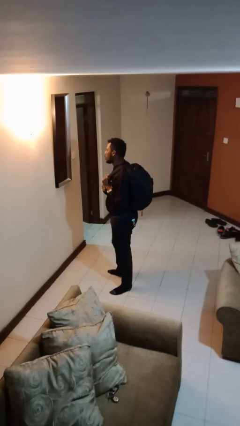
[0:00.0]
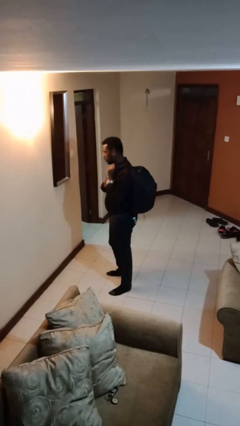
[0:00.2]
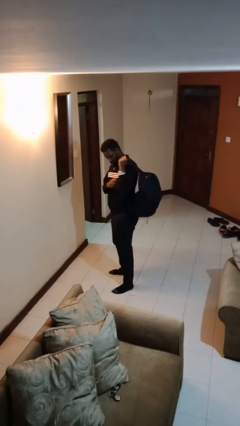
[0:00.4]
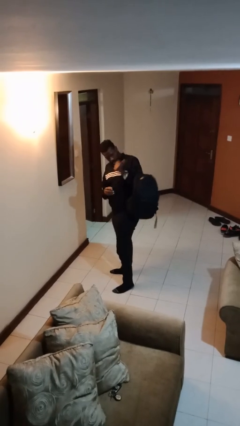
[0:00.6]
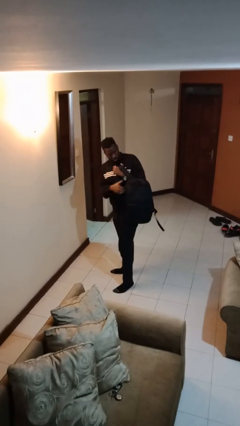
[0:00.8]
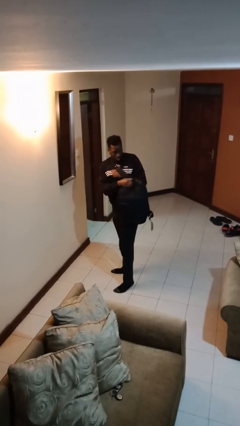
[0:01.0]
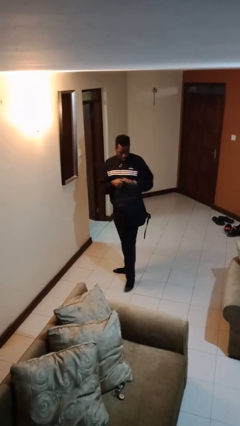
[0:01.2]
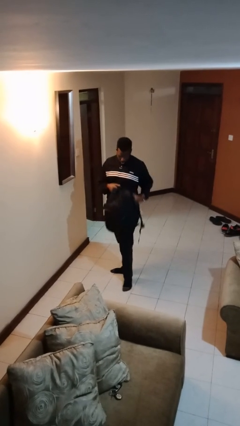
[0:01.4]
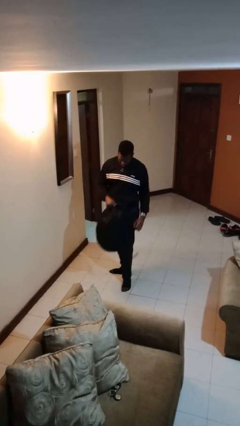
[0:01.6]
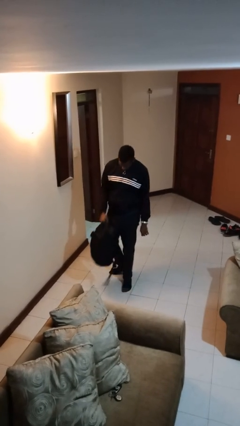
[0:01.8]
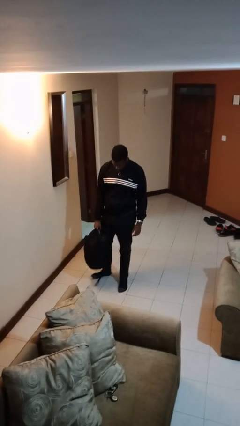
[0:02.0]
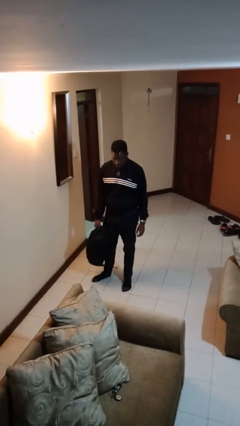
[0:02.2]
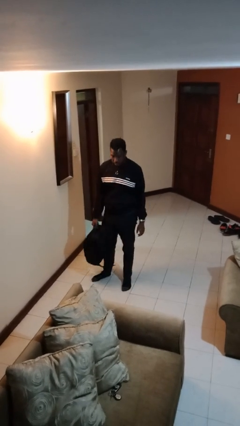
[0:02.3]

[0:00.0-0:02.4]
person takes off backpack

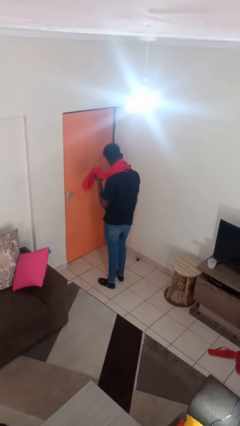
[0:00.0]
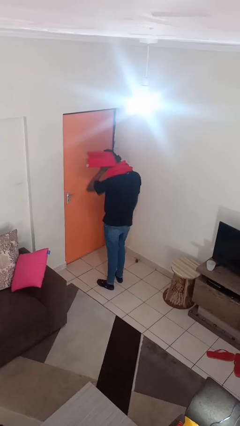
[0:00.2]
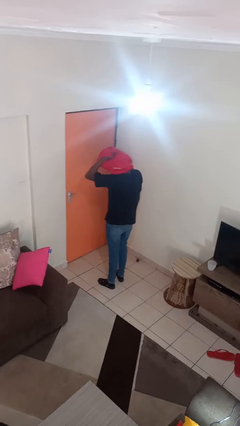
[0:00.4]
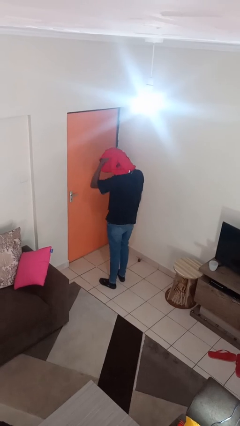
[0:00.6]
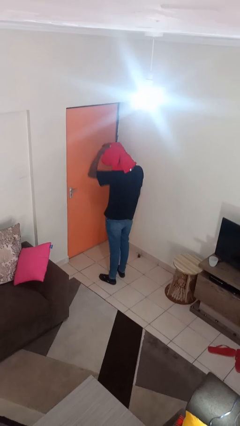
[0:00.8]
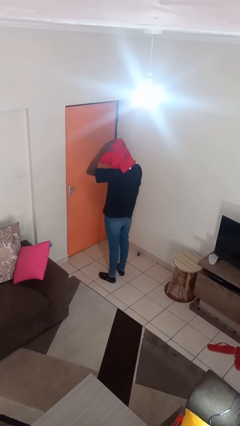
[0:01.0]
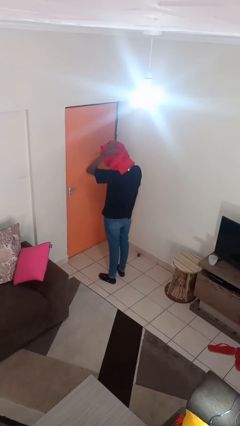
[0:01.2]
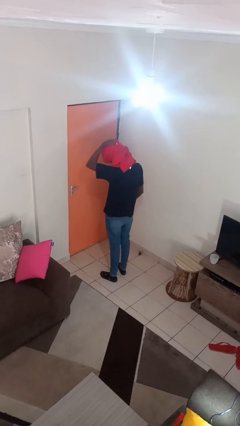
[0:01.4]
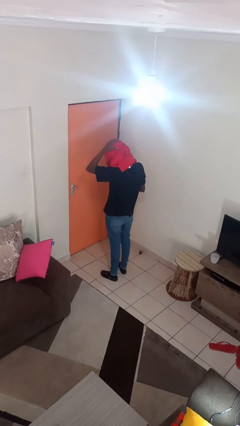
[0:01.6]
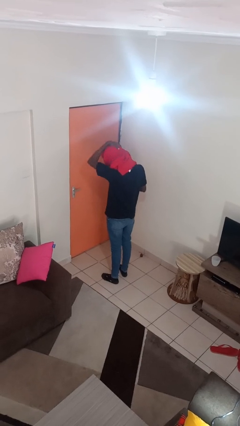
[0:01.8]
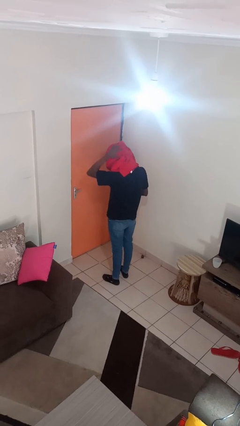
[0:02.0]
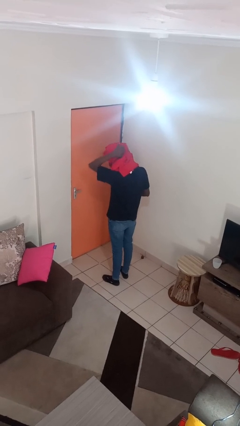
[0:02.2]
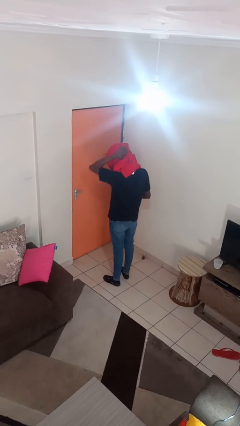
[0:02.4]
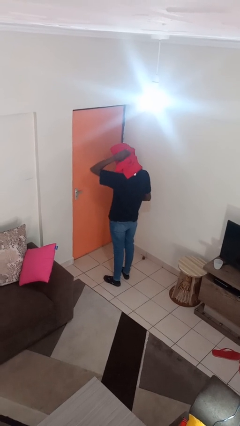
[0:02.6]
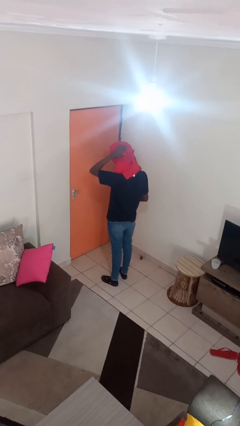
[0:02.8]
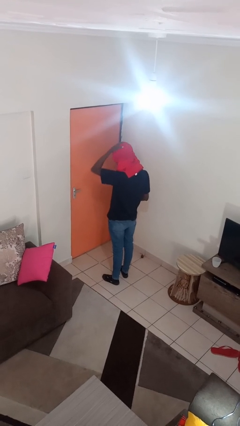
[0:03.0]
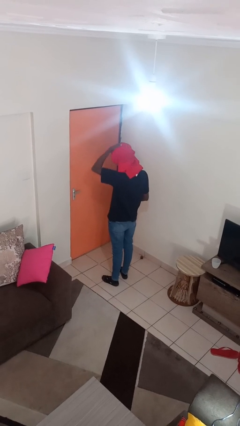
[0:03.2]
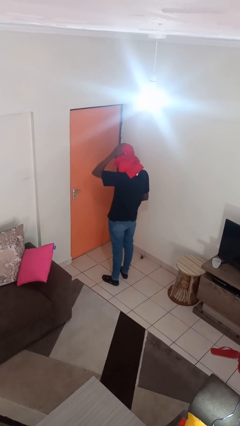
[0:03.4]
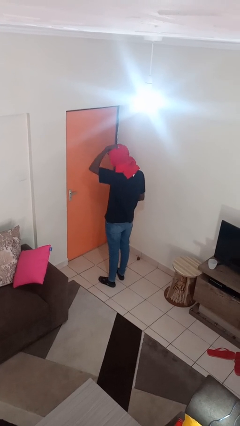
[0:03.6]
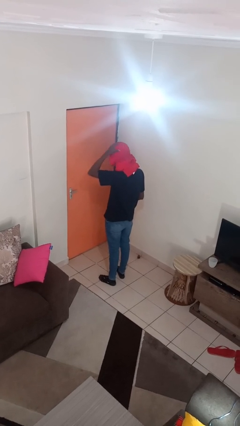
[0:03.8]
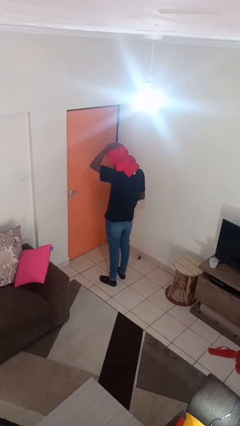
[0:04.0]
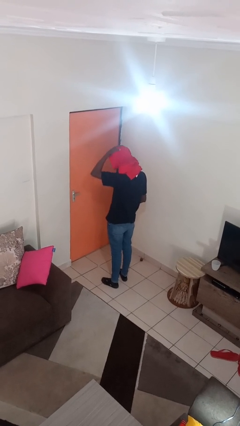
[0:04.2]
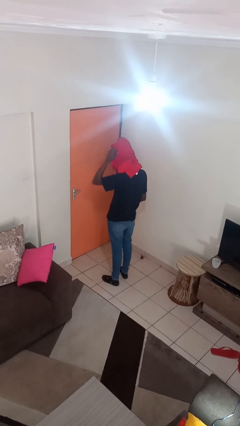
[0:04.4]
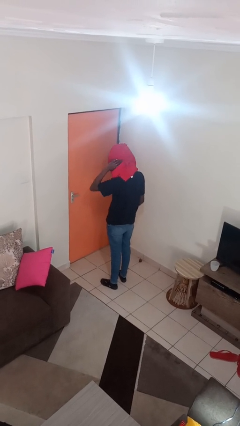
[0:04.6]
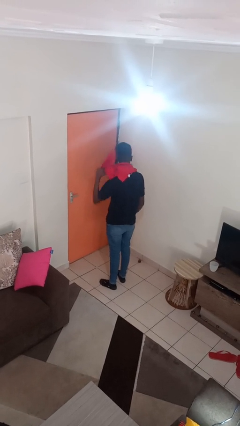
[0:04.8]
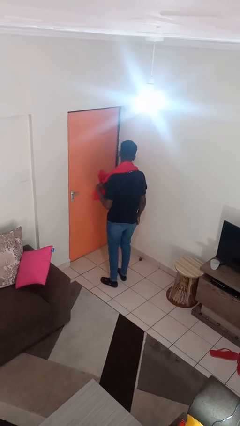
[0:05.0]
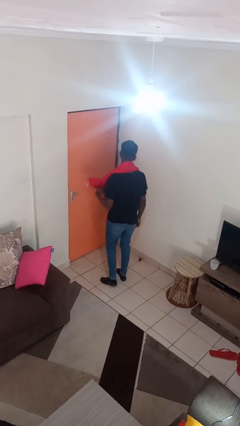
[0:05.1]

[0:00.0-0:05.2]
person dries hair with towel

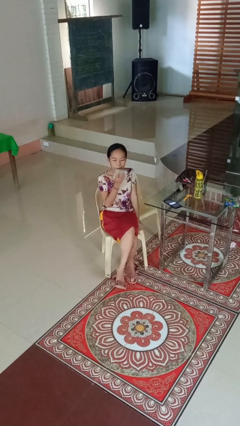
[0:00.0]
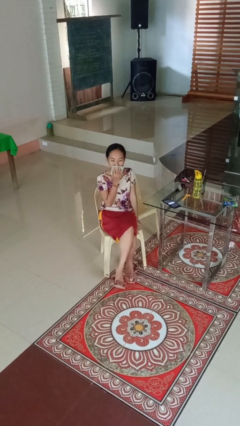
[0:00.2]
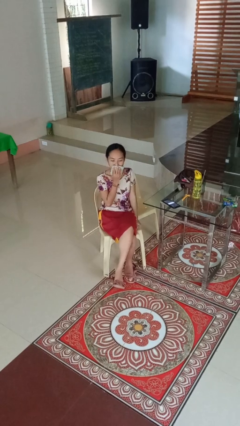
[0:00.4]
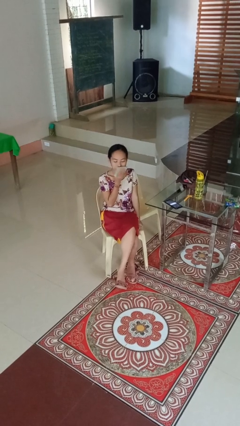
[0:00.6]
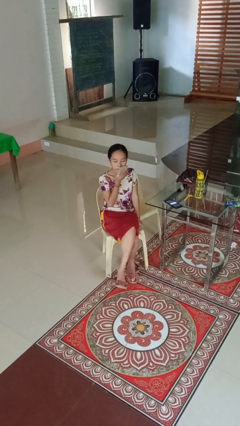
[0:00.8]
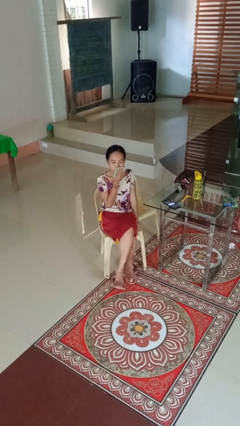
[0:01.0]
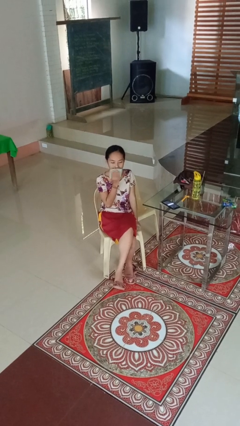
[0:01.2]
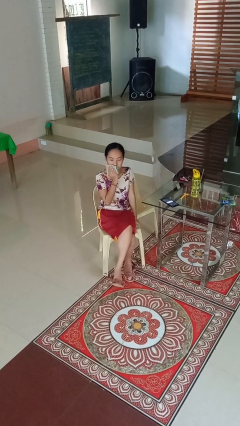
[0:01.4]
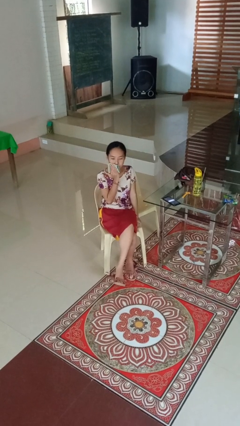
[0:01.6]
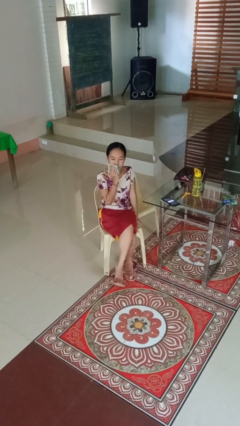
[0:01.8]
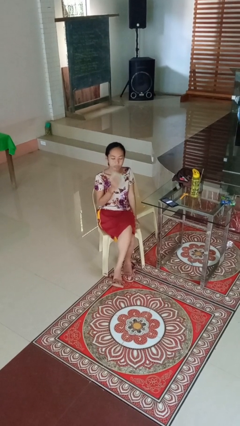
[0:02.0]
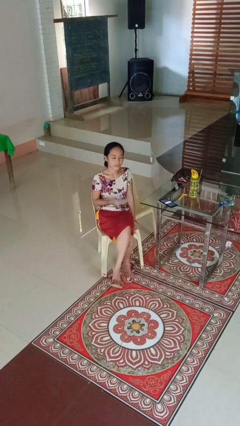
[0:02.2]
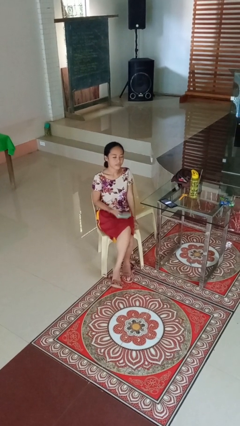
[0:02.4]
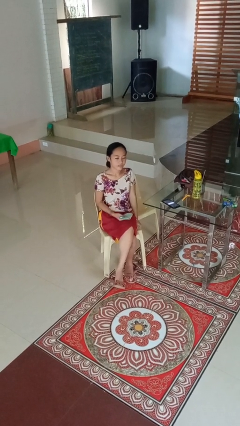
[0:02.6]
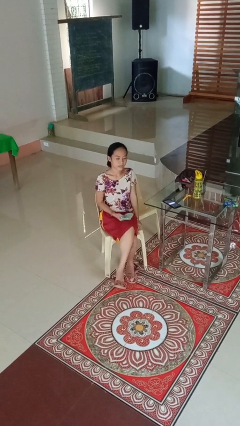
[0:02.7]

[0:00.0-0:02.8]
person wipes mouth with napkin

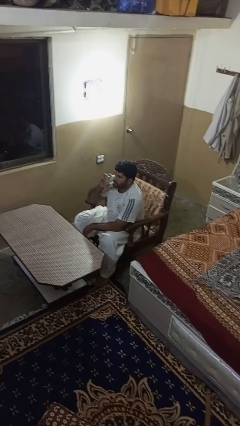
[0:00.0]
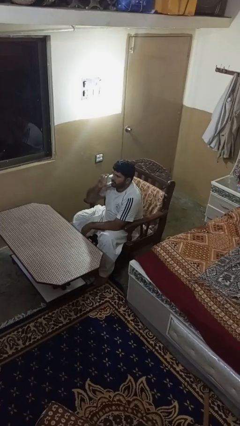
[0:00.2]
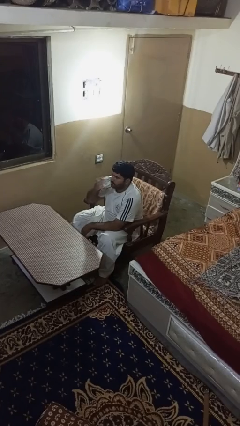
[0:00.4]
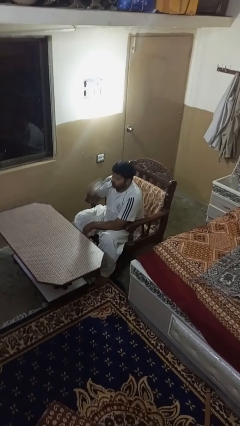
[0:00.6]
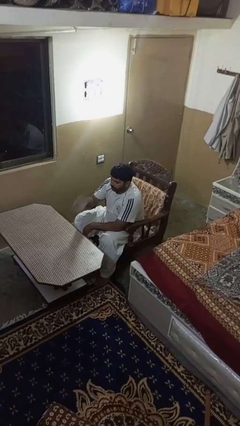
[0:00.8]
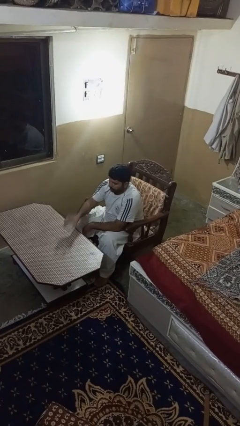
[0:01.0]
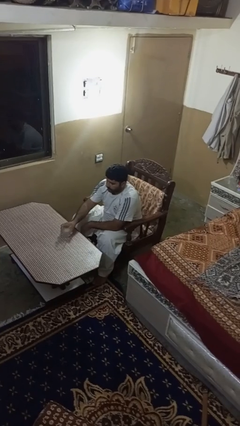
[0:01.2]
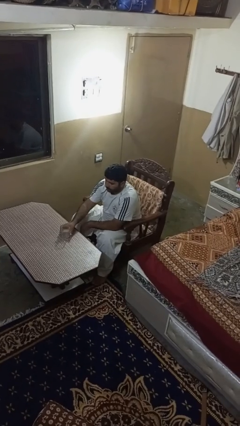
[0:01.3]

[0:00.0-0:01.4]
person puts down object on table

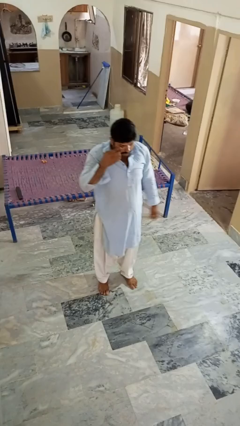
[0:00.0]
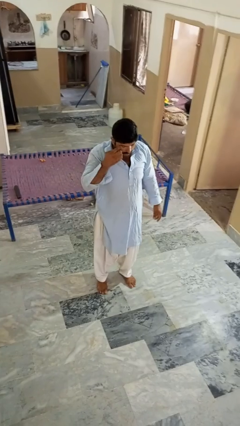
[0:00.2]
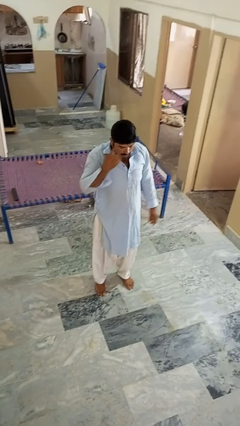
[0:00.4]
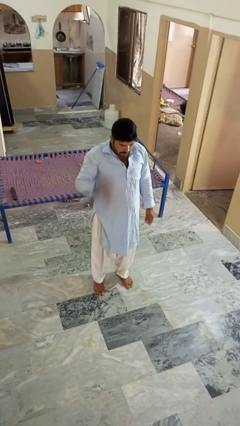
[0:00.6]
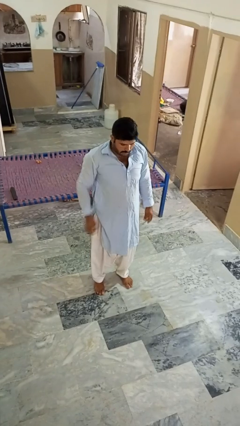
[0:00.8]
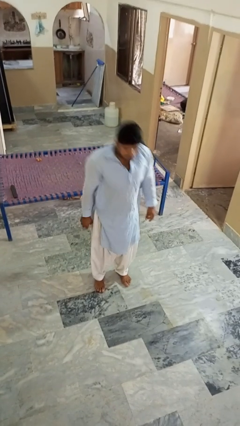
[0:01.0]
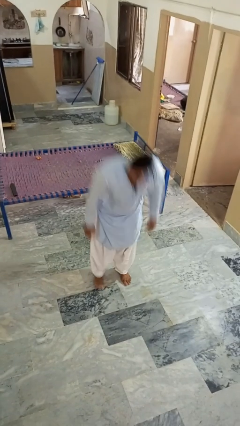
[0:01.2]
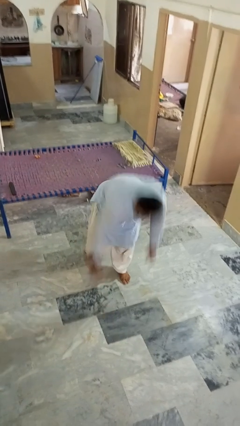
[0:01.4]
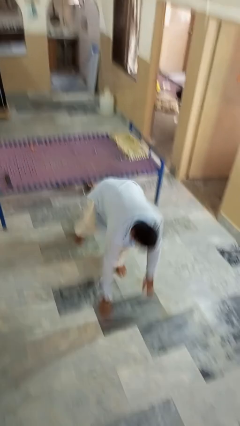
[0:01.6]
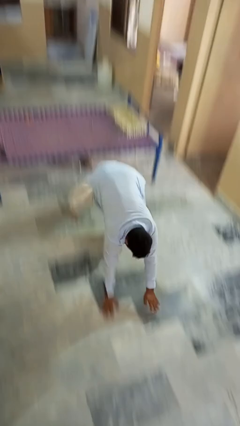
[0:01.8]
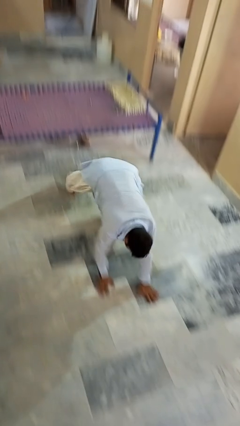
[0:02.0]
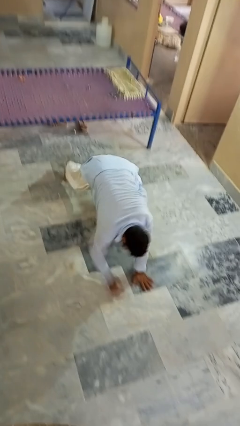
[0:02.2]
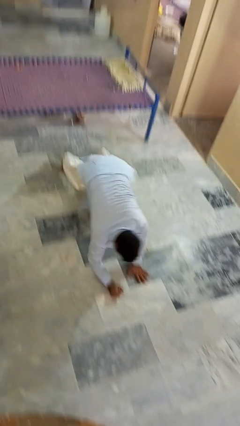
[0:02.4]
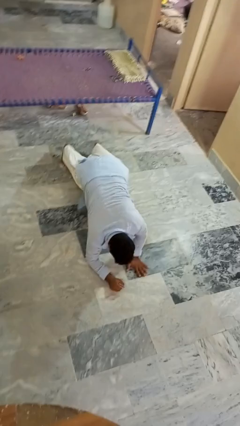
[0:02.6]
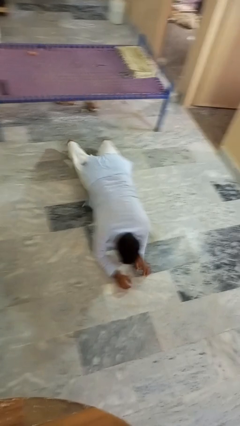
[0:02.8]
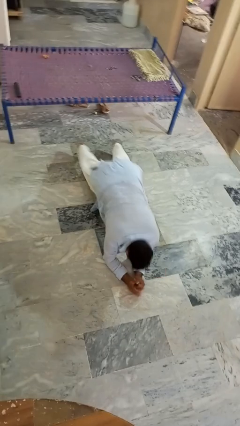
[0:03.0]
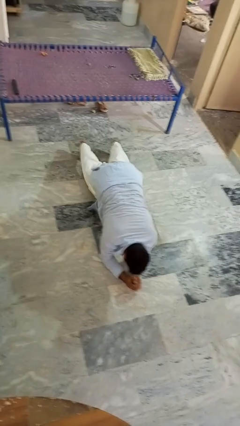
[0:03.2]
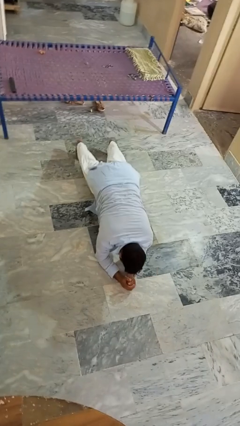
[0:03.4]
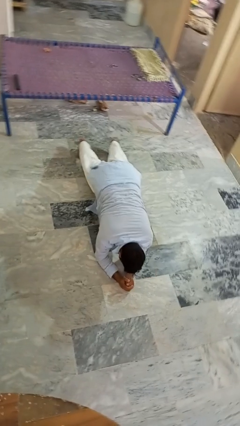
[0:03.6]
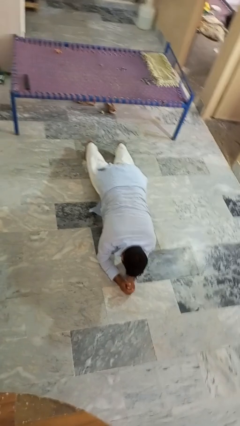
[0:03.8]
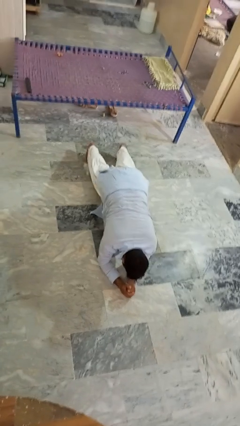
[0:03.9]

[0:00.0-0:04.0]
person exercises with plank

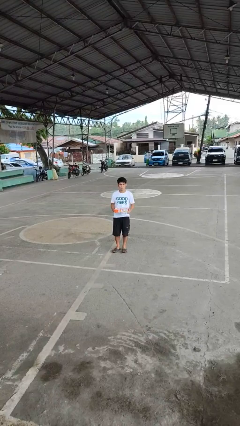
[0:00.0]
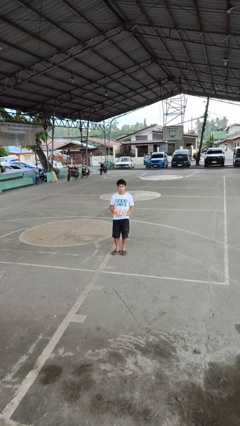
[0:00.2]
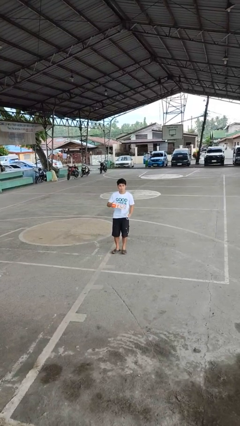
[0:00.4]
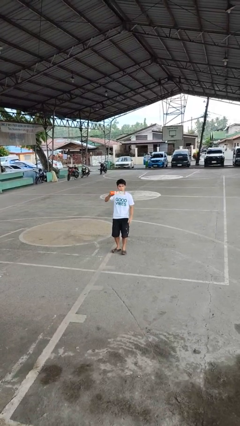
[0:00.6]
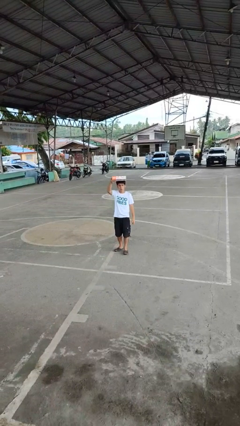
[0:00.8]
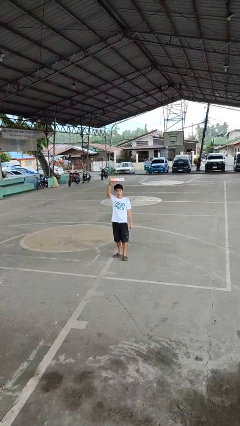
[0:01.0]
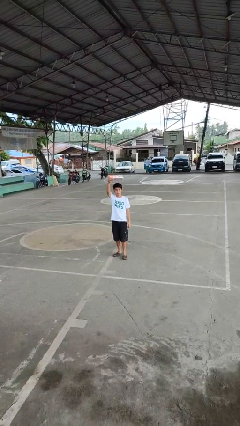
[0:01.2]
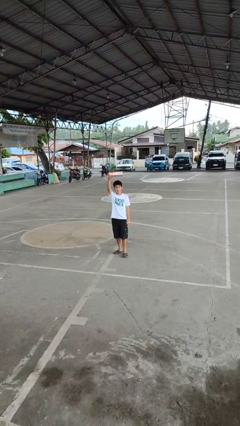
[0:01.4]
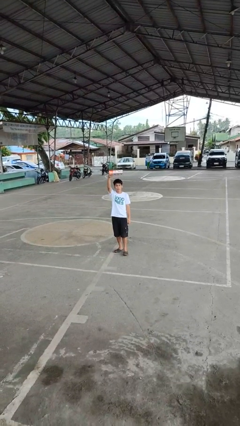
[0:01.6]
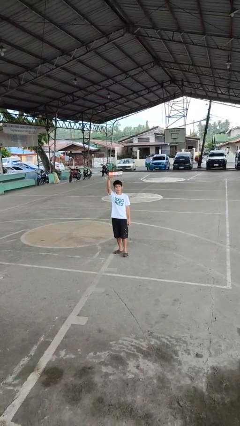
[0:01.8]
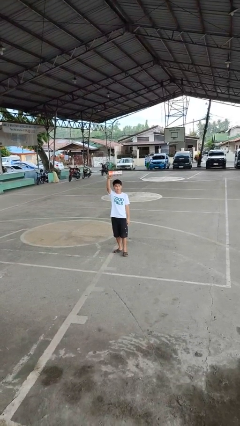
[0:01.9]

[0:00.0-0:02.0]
person holds object above head
